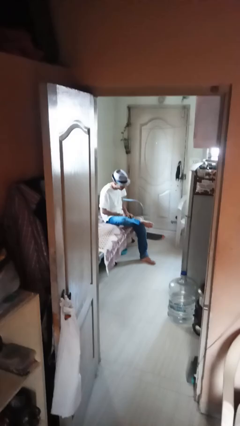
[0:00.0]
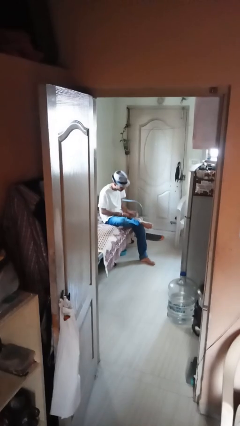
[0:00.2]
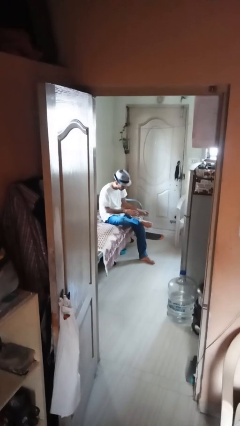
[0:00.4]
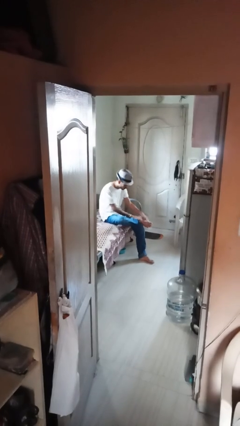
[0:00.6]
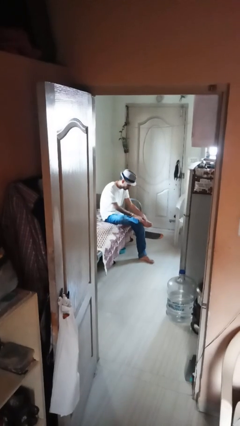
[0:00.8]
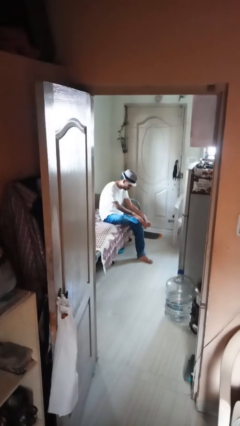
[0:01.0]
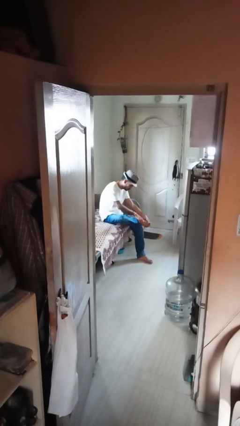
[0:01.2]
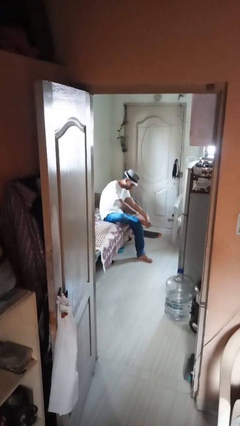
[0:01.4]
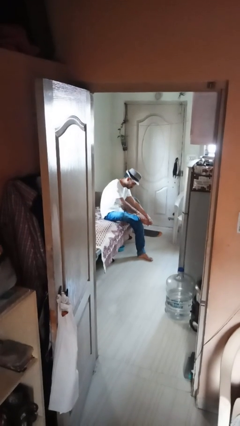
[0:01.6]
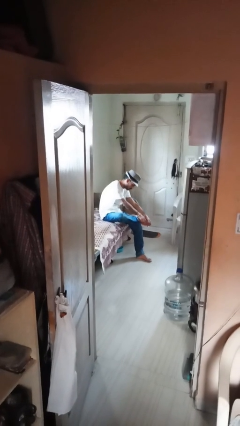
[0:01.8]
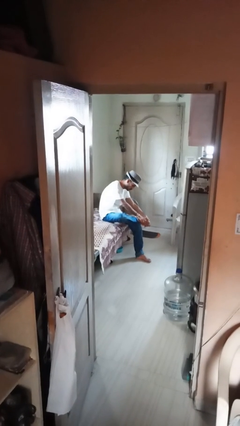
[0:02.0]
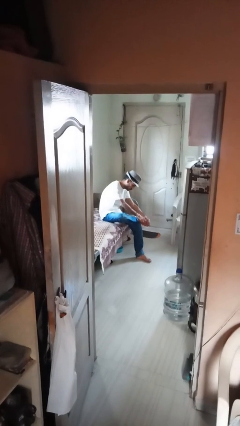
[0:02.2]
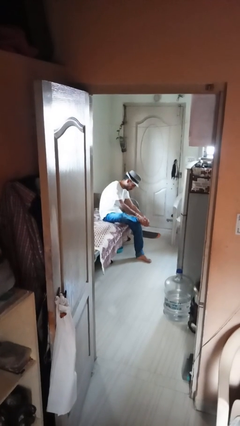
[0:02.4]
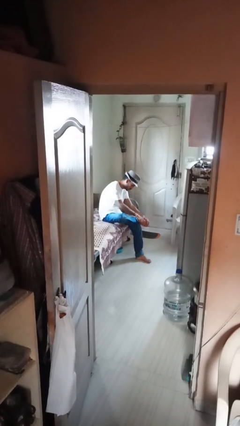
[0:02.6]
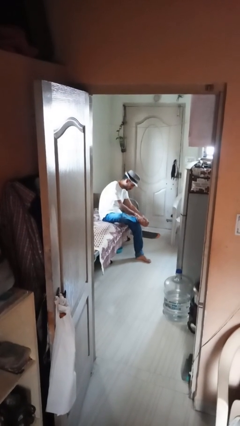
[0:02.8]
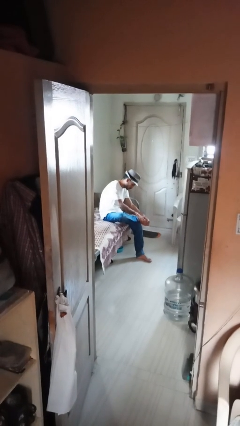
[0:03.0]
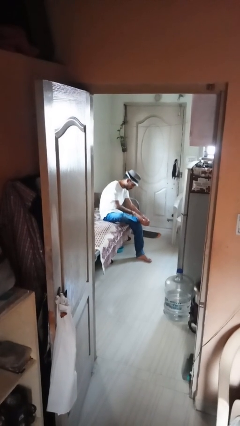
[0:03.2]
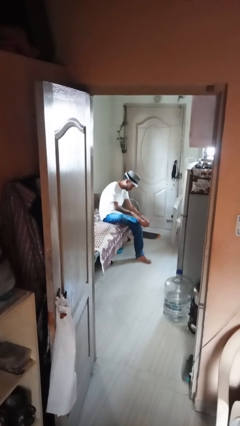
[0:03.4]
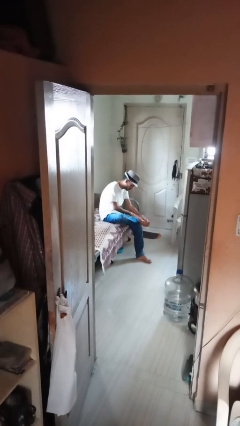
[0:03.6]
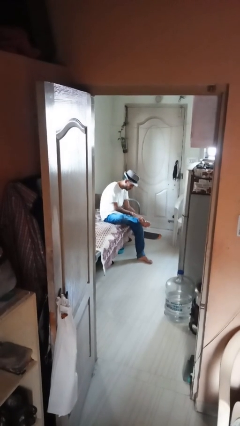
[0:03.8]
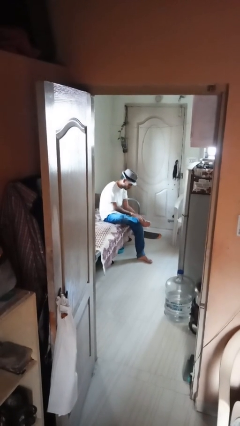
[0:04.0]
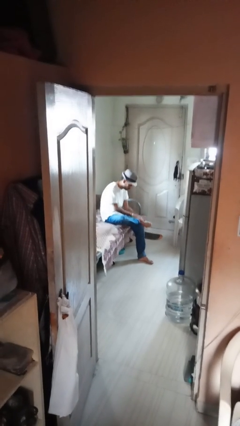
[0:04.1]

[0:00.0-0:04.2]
person rubs foot

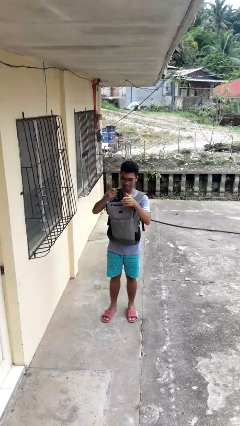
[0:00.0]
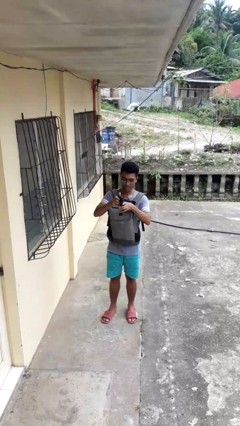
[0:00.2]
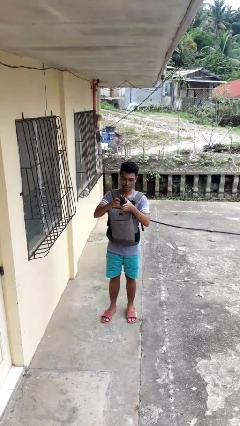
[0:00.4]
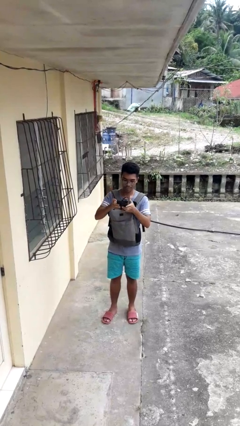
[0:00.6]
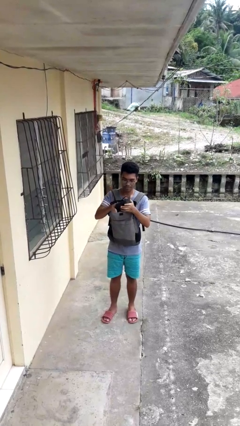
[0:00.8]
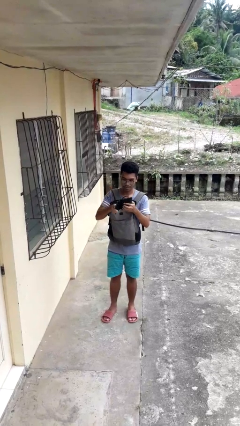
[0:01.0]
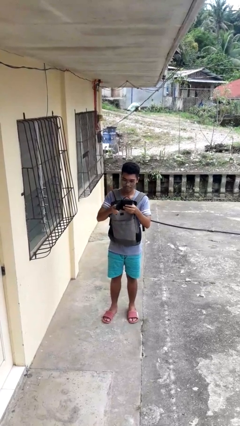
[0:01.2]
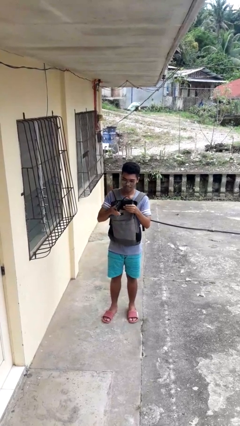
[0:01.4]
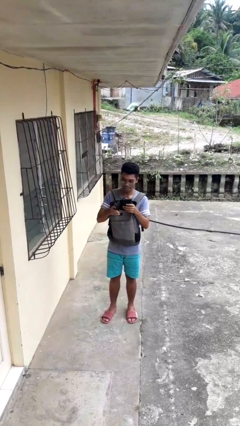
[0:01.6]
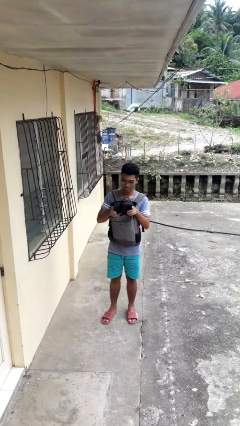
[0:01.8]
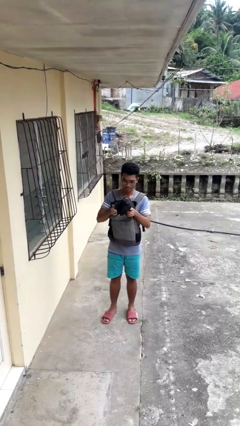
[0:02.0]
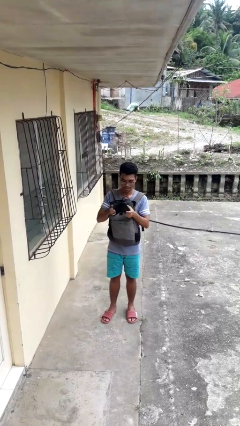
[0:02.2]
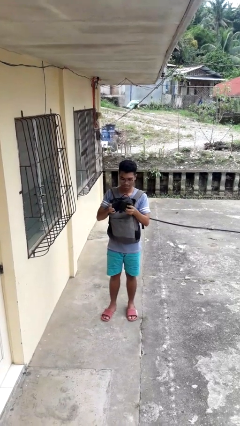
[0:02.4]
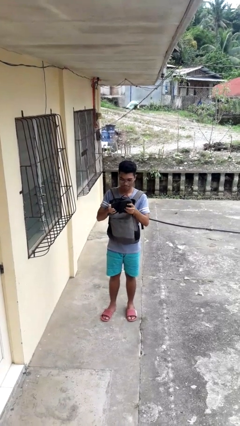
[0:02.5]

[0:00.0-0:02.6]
person takes object from backpack

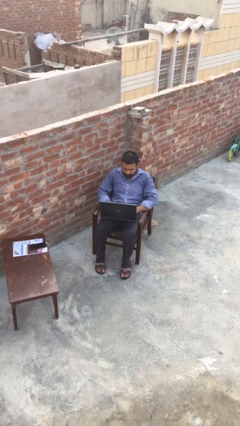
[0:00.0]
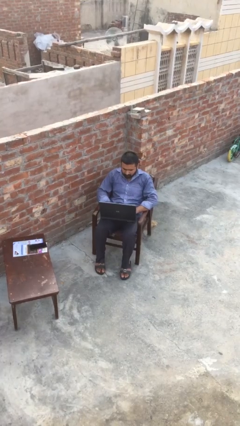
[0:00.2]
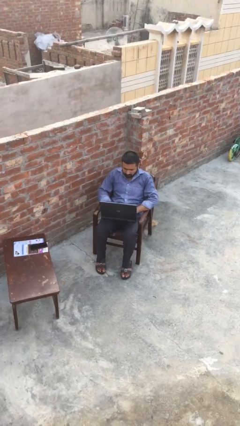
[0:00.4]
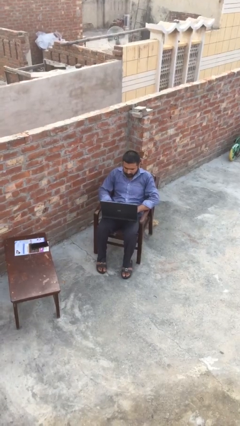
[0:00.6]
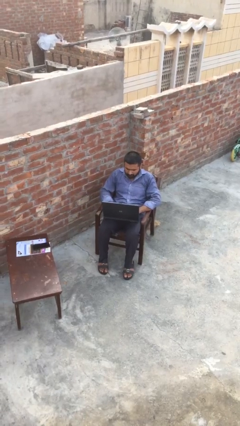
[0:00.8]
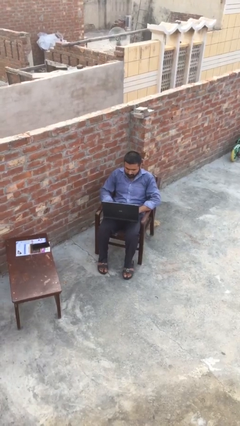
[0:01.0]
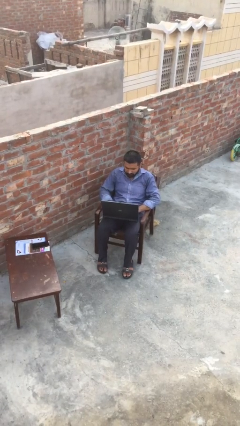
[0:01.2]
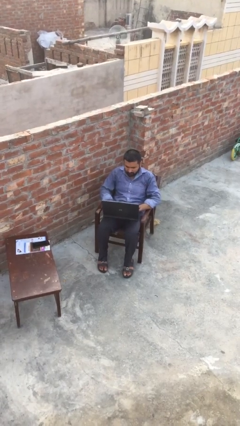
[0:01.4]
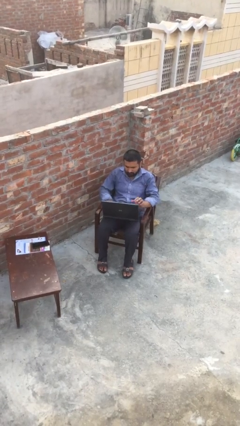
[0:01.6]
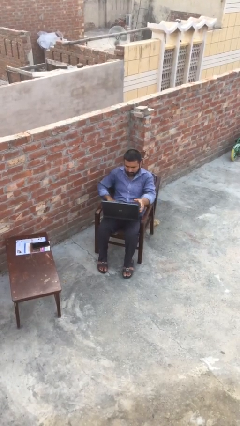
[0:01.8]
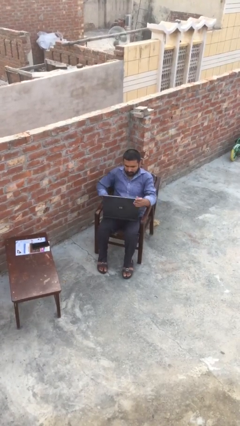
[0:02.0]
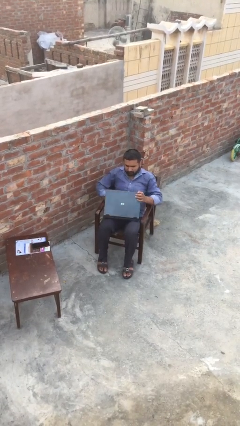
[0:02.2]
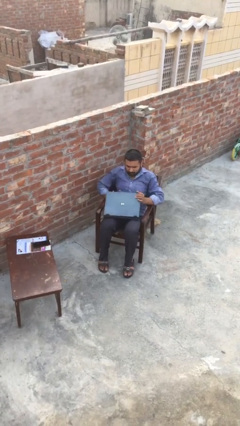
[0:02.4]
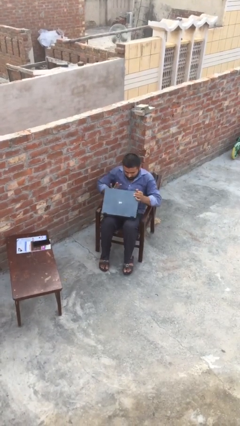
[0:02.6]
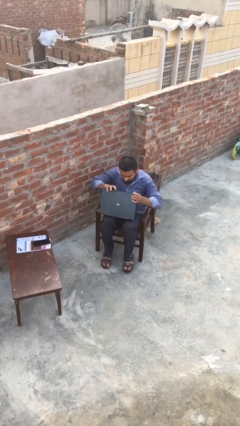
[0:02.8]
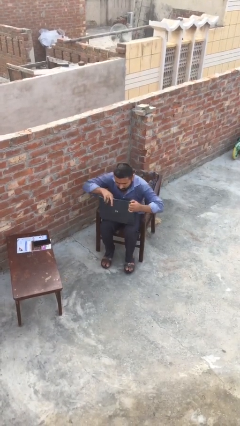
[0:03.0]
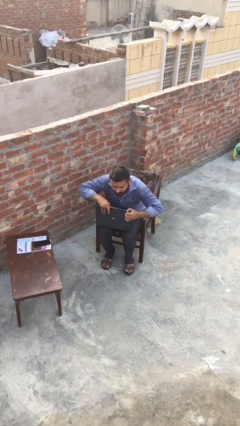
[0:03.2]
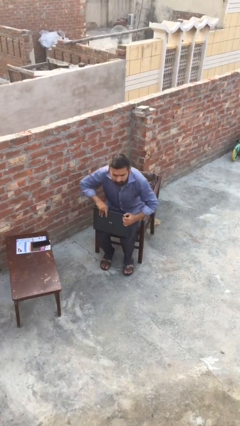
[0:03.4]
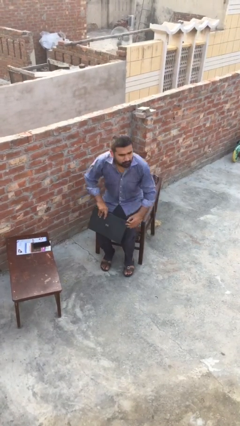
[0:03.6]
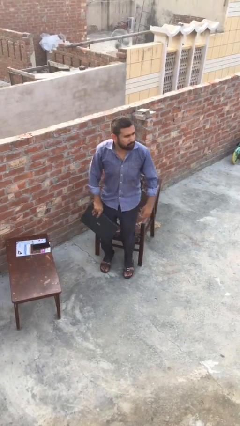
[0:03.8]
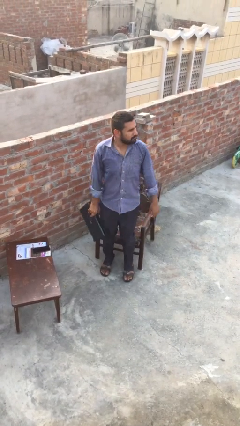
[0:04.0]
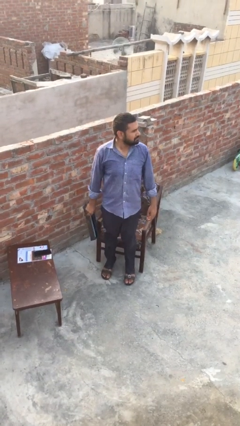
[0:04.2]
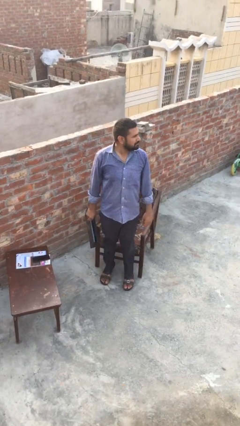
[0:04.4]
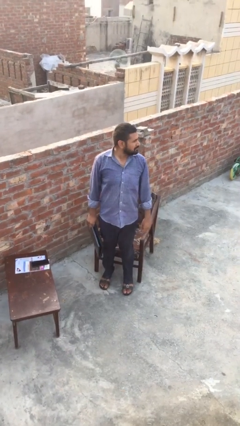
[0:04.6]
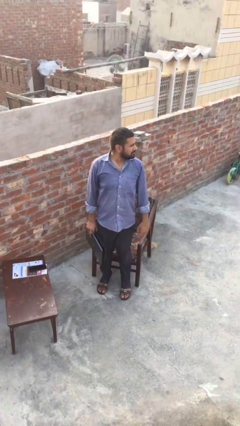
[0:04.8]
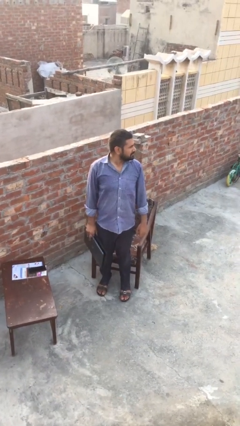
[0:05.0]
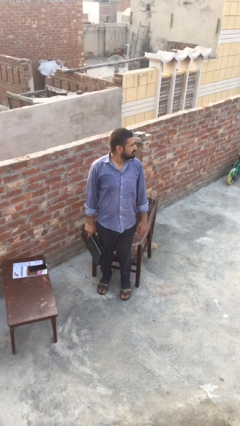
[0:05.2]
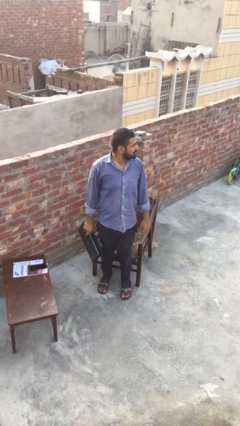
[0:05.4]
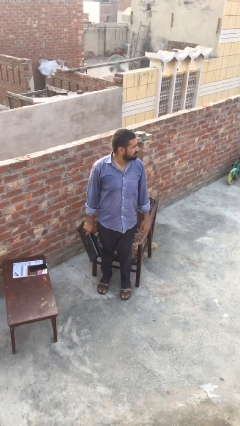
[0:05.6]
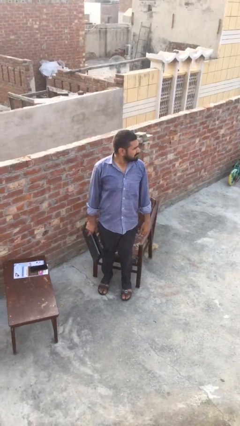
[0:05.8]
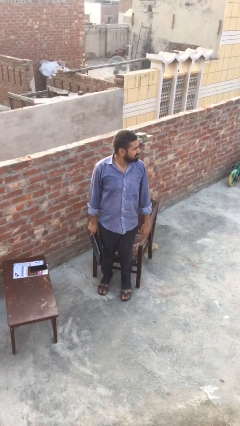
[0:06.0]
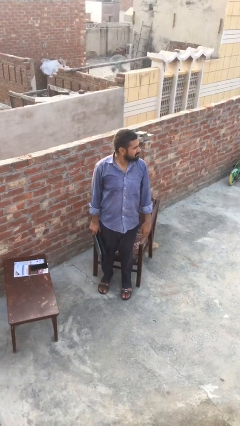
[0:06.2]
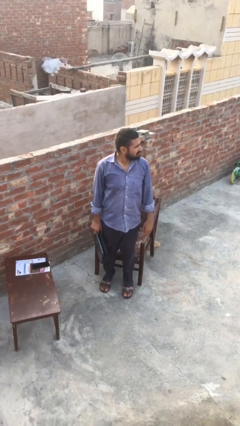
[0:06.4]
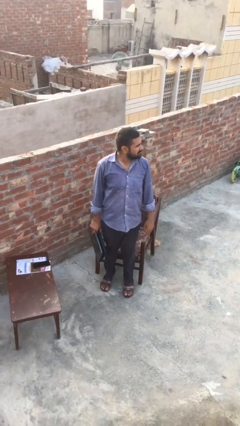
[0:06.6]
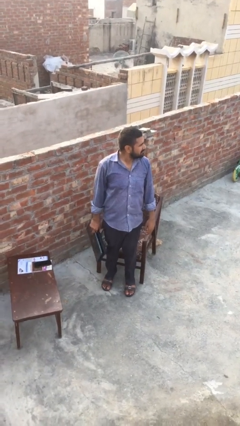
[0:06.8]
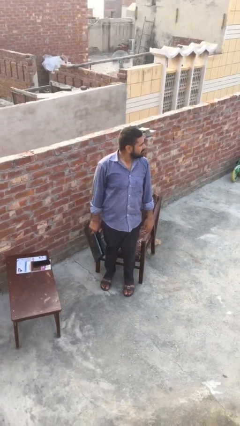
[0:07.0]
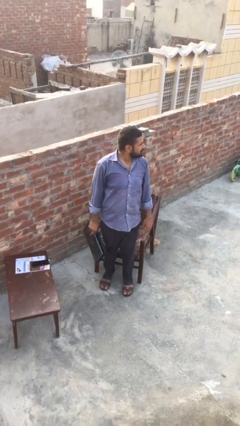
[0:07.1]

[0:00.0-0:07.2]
person stands up

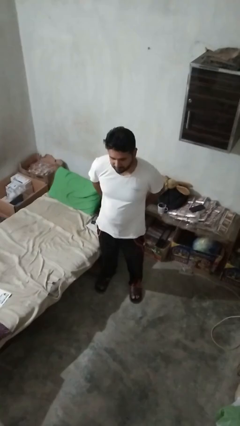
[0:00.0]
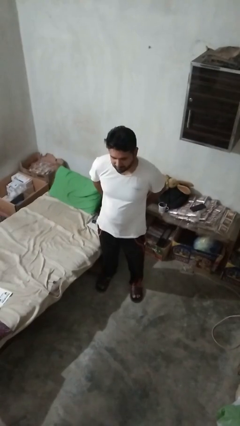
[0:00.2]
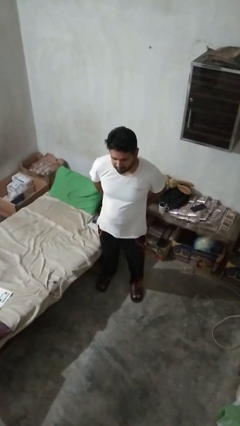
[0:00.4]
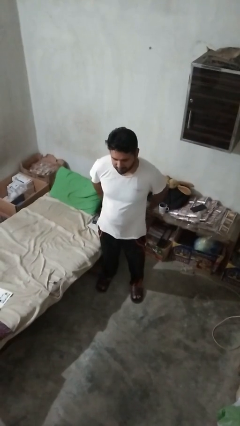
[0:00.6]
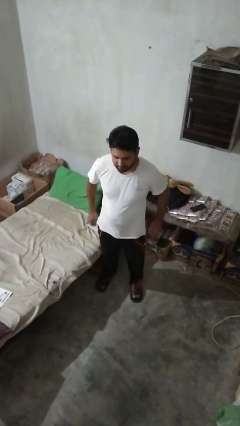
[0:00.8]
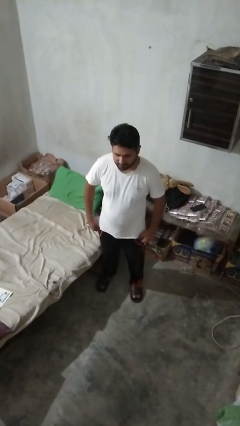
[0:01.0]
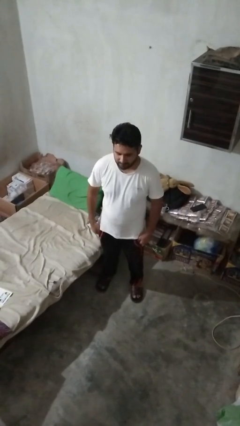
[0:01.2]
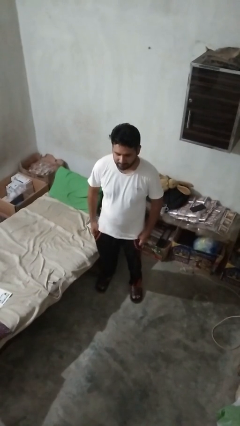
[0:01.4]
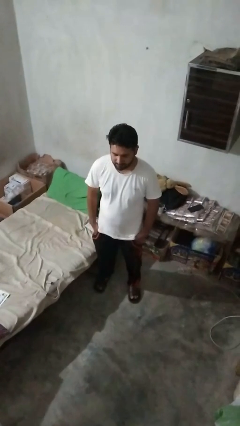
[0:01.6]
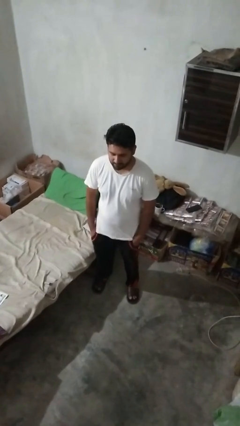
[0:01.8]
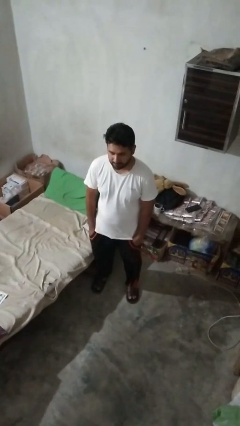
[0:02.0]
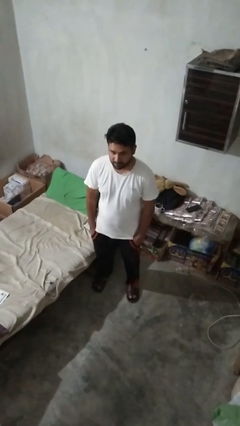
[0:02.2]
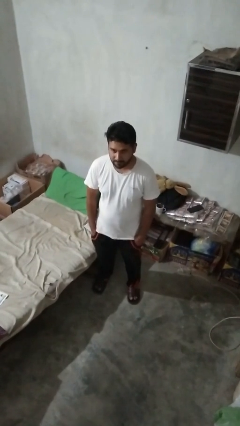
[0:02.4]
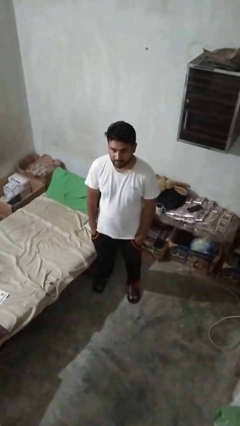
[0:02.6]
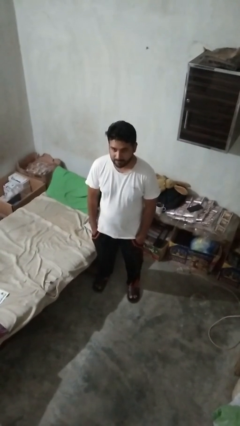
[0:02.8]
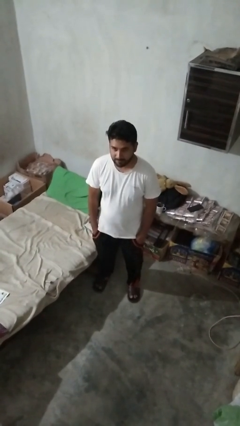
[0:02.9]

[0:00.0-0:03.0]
person puts hands in back pockets

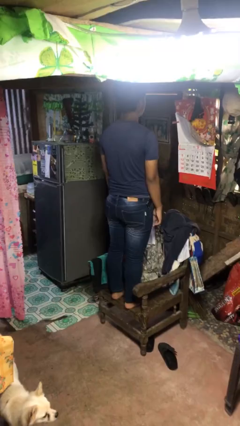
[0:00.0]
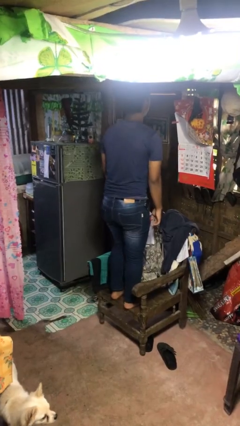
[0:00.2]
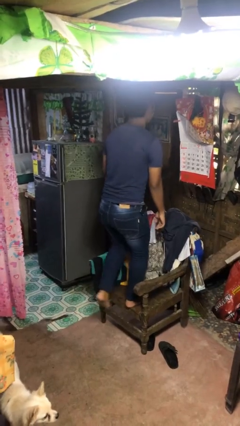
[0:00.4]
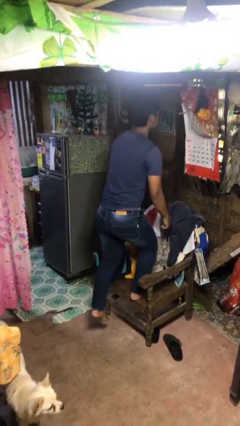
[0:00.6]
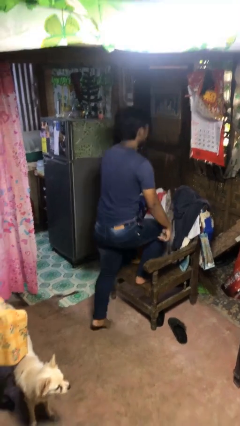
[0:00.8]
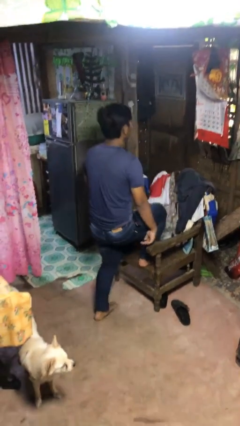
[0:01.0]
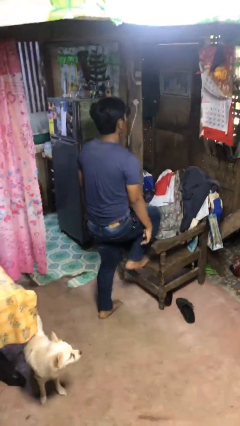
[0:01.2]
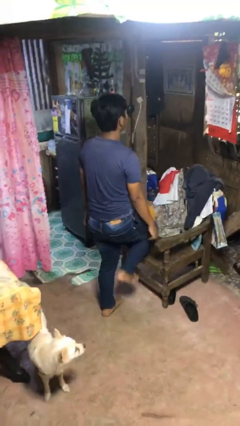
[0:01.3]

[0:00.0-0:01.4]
person climbs off chair
